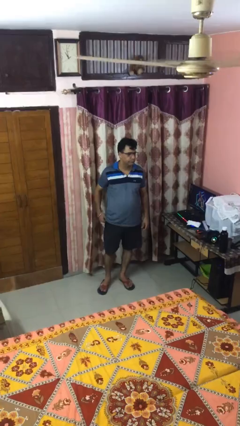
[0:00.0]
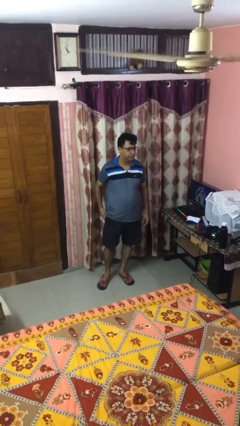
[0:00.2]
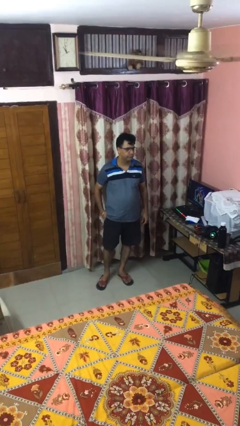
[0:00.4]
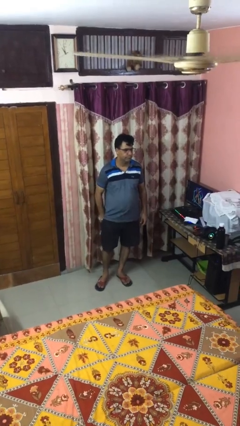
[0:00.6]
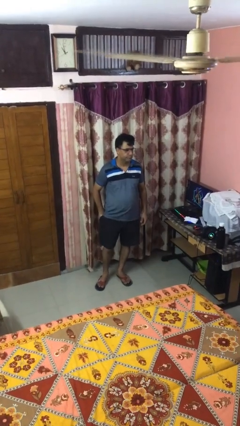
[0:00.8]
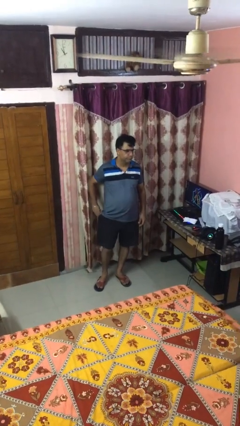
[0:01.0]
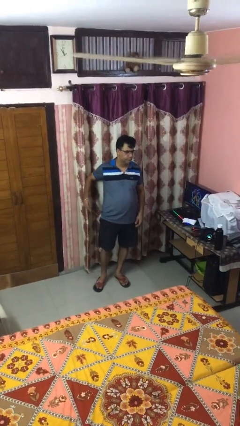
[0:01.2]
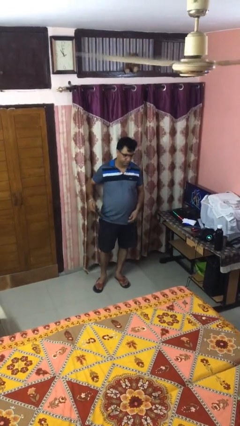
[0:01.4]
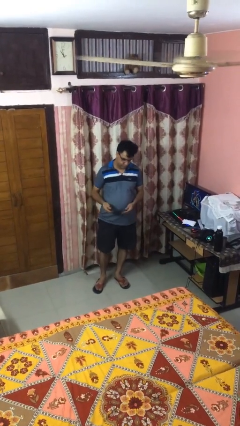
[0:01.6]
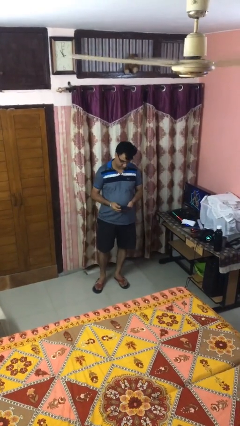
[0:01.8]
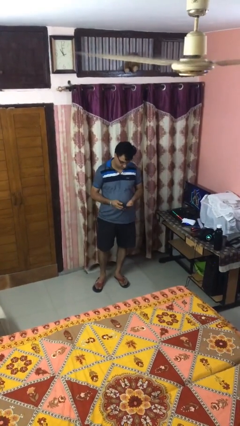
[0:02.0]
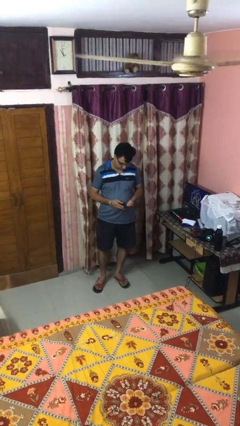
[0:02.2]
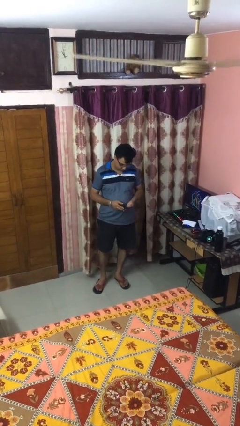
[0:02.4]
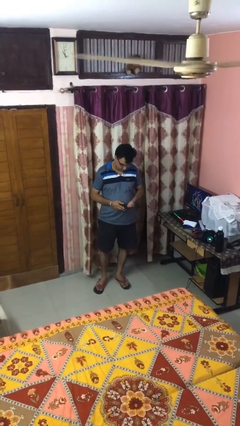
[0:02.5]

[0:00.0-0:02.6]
person takes phone from pocket

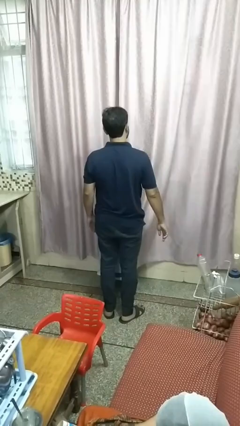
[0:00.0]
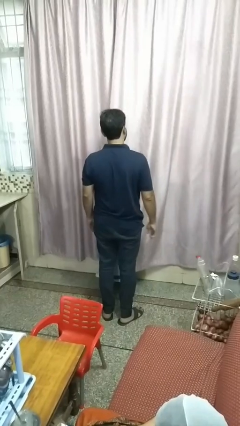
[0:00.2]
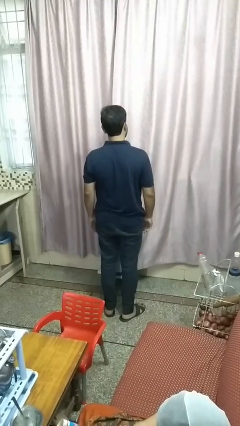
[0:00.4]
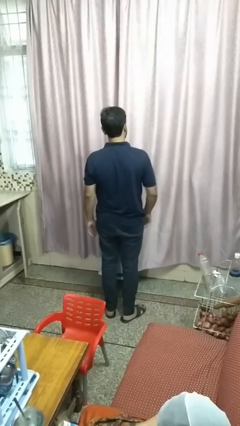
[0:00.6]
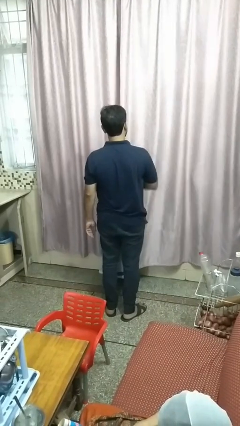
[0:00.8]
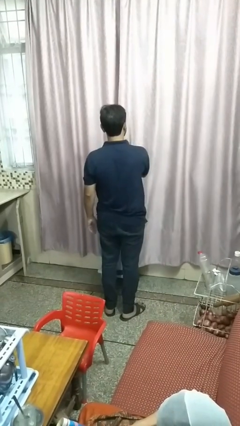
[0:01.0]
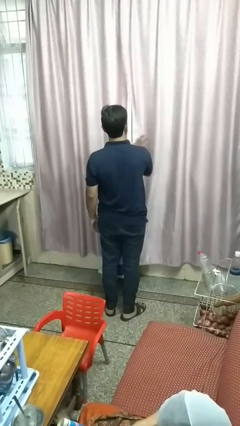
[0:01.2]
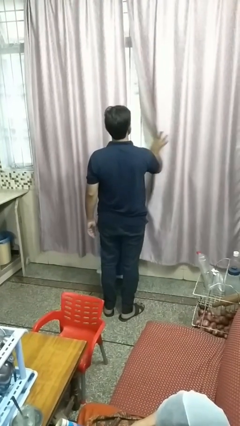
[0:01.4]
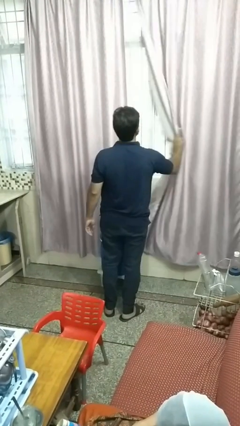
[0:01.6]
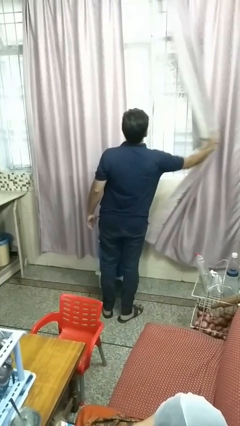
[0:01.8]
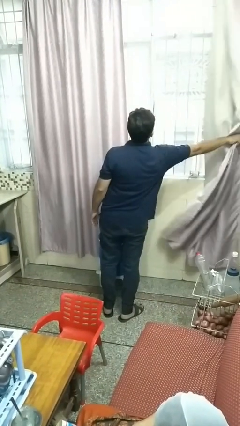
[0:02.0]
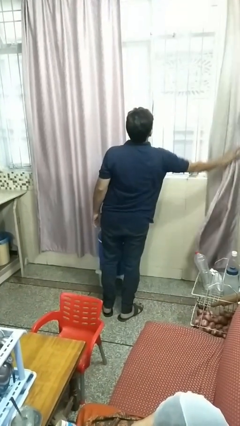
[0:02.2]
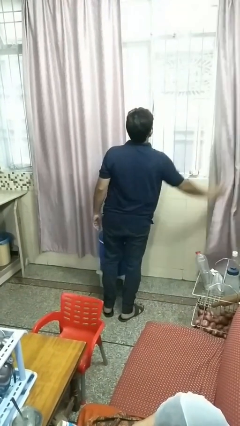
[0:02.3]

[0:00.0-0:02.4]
person opens curtains

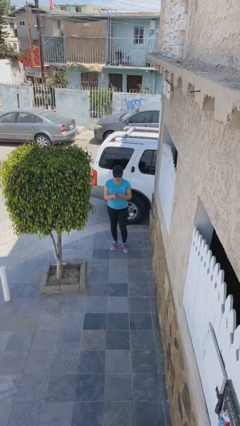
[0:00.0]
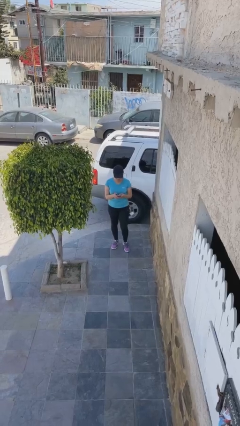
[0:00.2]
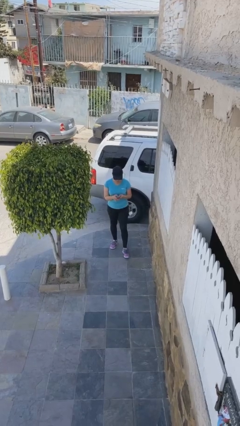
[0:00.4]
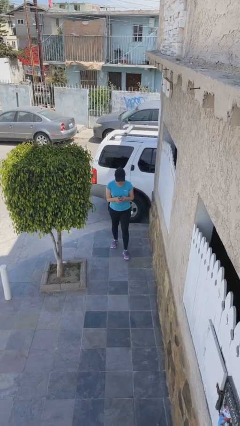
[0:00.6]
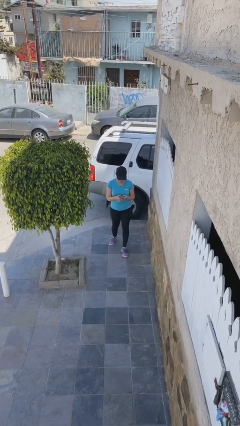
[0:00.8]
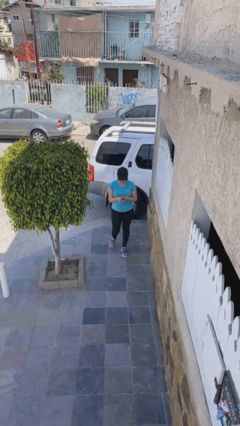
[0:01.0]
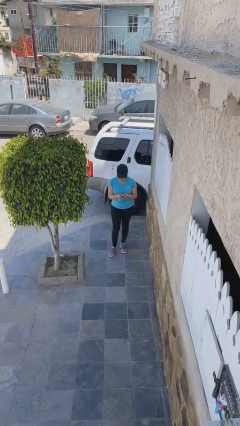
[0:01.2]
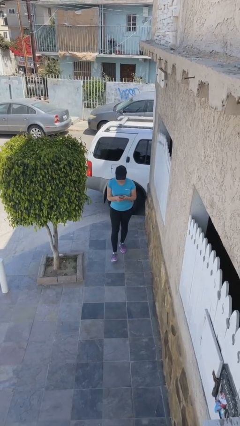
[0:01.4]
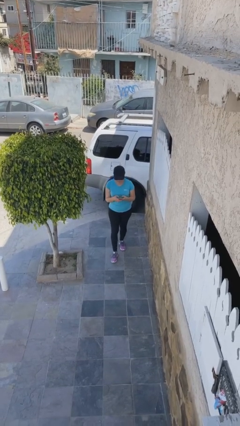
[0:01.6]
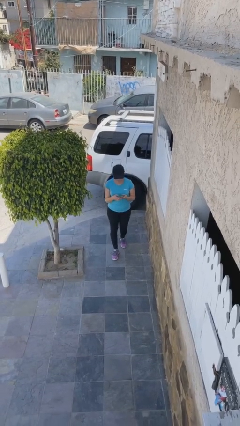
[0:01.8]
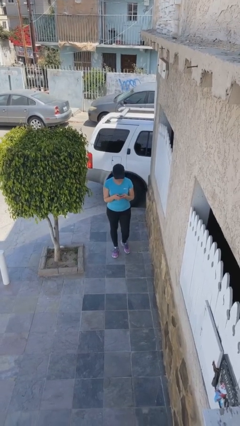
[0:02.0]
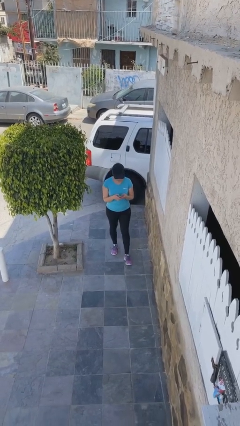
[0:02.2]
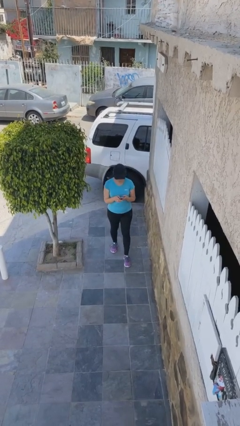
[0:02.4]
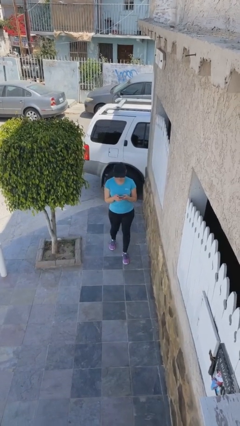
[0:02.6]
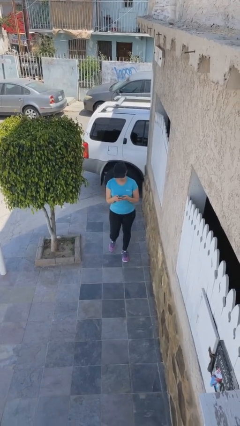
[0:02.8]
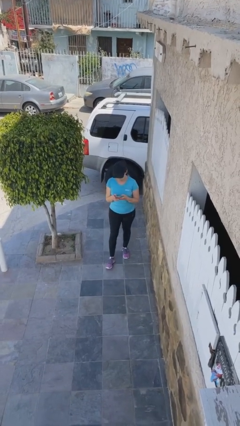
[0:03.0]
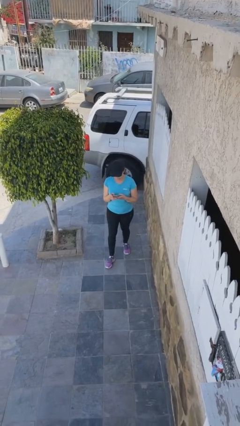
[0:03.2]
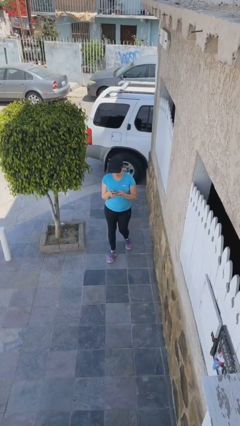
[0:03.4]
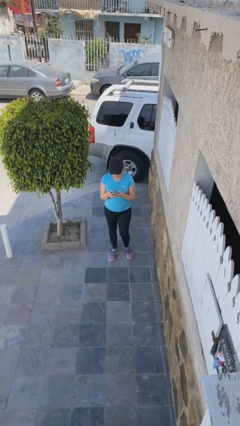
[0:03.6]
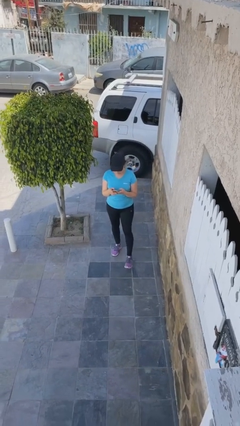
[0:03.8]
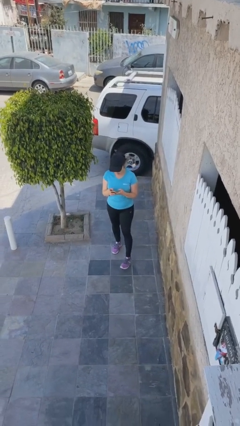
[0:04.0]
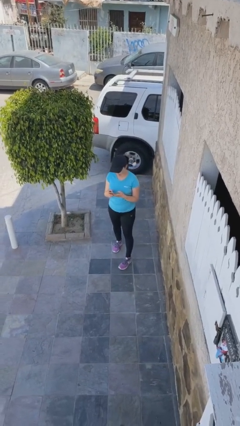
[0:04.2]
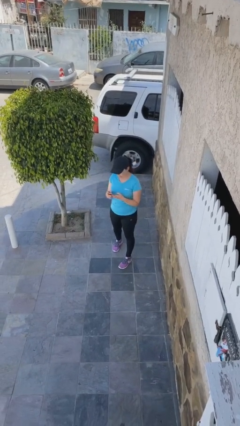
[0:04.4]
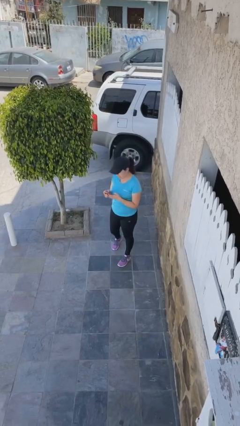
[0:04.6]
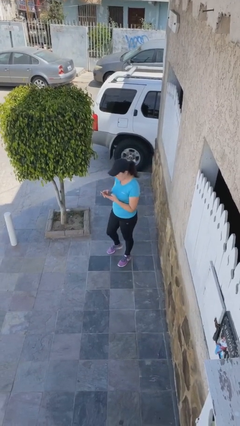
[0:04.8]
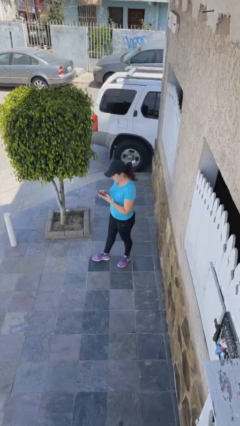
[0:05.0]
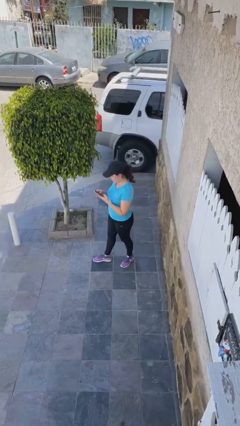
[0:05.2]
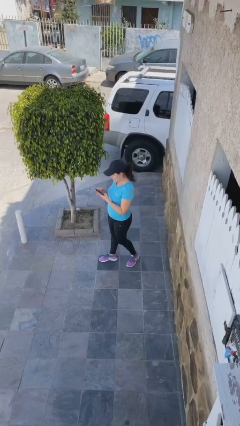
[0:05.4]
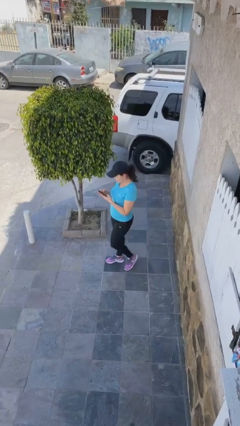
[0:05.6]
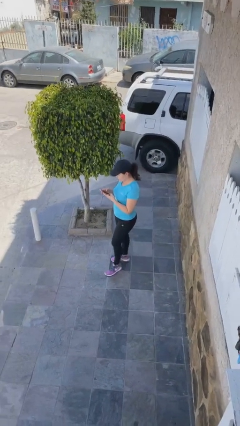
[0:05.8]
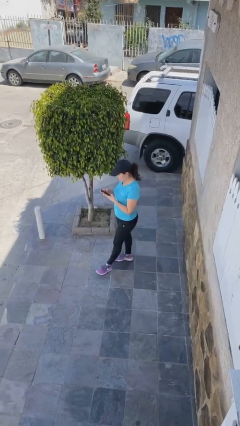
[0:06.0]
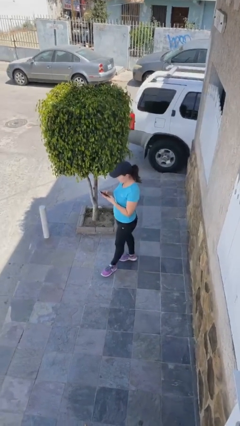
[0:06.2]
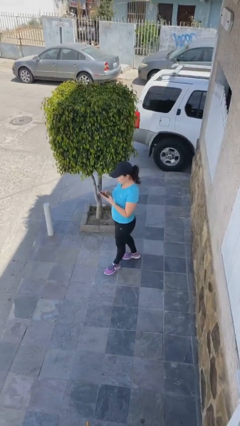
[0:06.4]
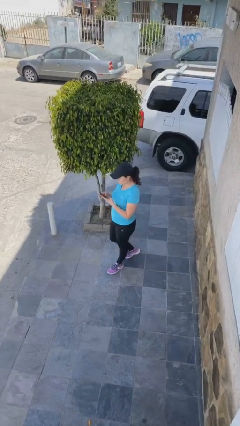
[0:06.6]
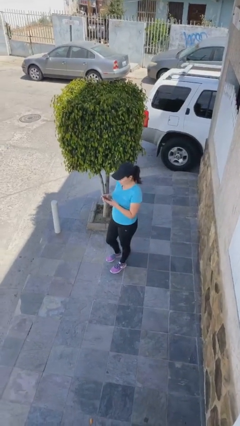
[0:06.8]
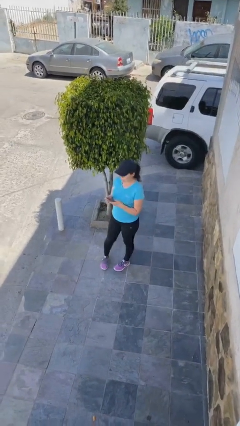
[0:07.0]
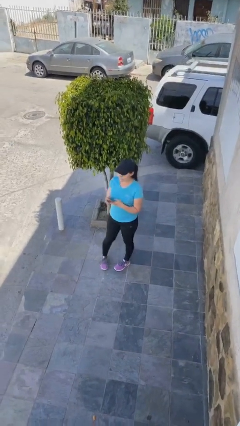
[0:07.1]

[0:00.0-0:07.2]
person texts on phone

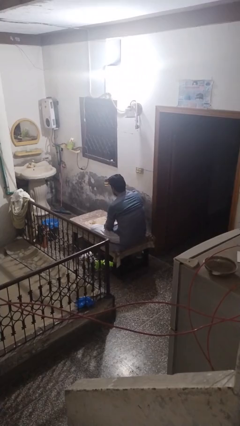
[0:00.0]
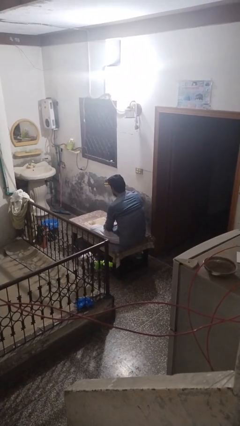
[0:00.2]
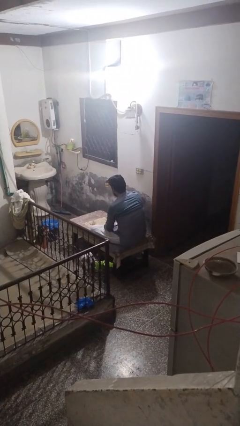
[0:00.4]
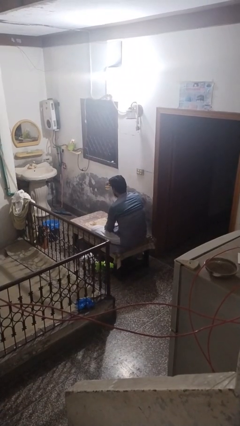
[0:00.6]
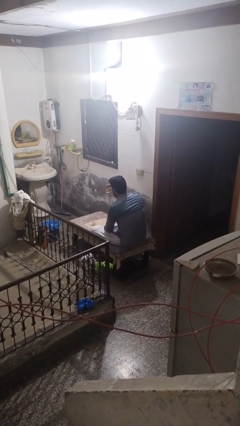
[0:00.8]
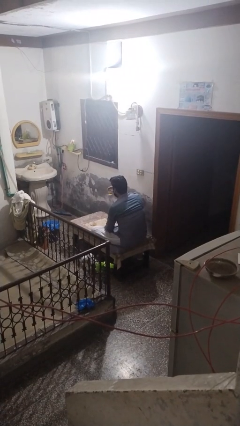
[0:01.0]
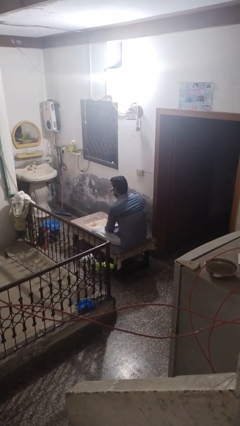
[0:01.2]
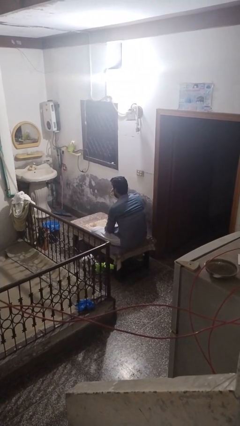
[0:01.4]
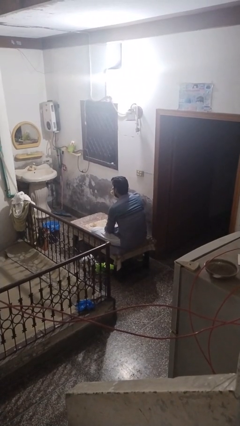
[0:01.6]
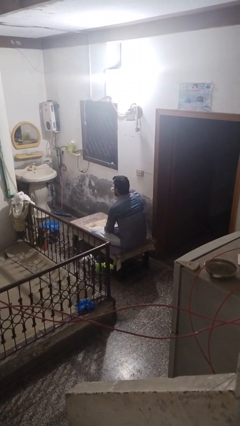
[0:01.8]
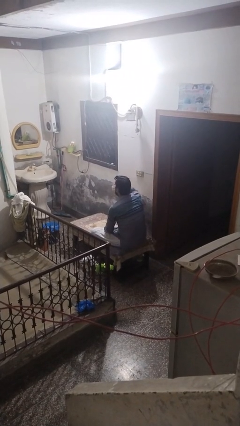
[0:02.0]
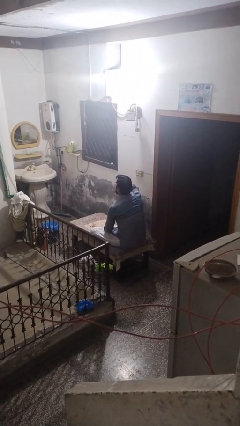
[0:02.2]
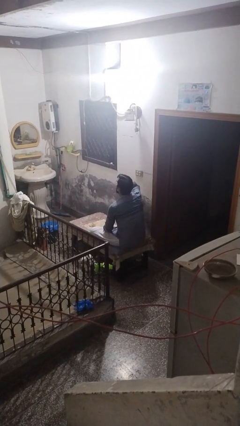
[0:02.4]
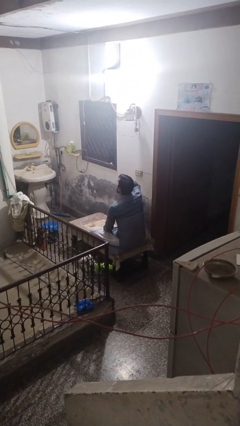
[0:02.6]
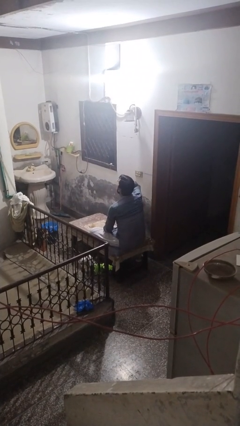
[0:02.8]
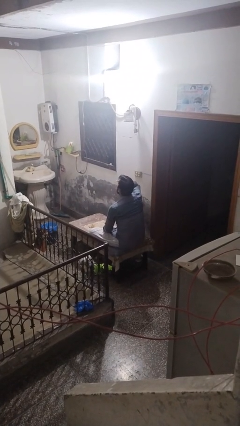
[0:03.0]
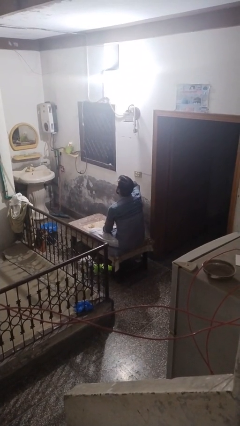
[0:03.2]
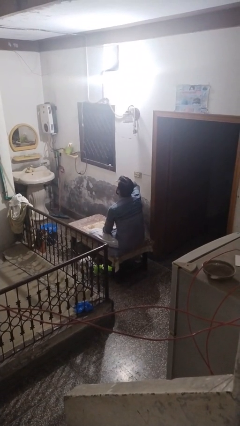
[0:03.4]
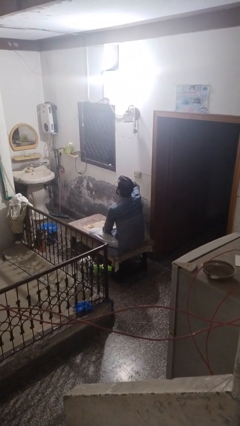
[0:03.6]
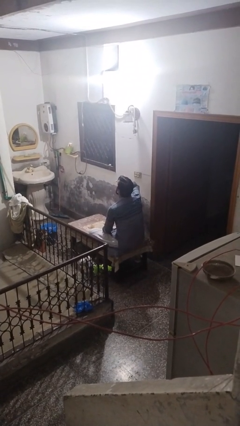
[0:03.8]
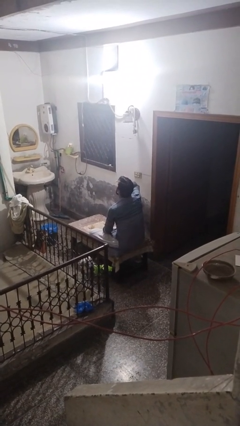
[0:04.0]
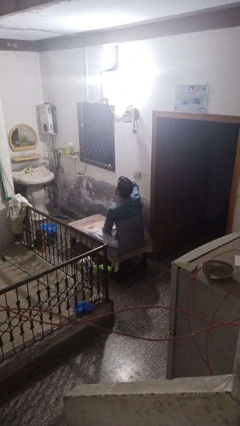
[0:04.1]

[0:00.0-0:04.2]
person drinks from shotglass

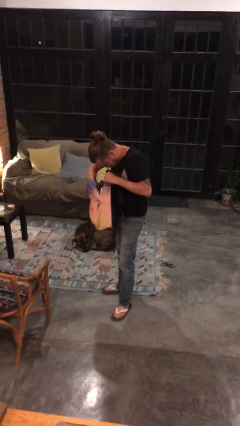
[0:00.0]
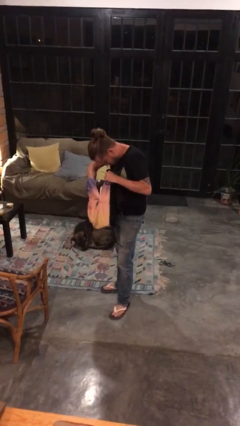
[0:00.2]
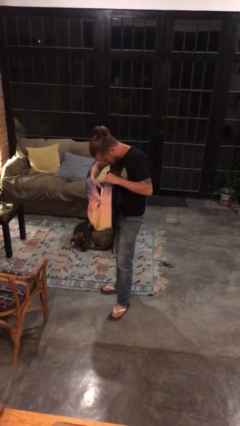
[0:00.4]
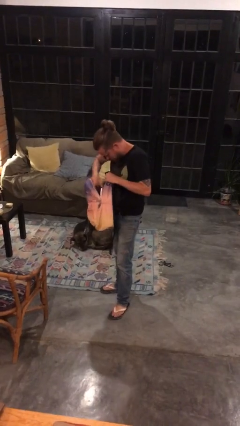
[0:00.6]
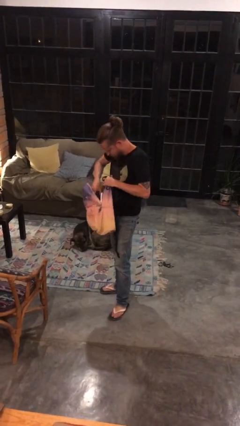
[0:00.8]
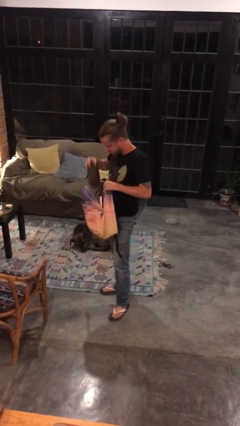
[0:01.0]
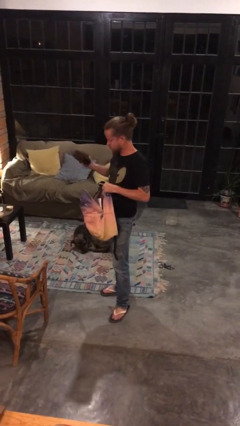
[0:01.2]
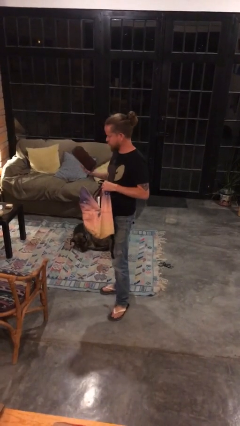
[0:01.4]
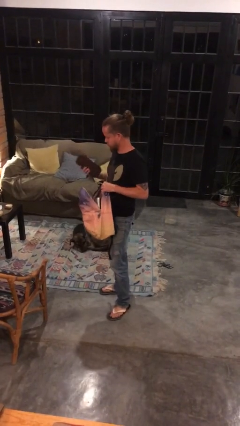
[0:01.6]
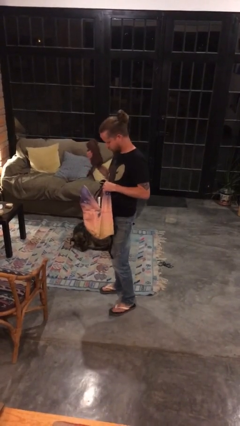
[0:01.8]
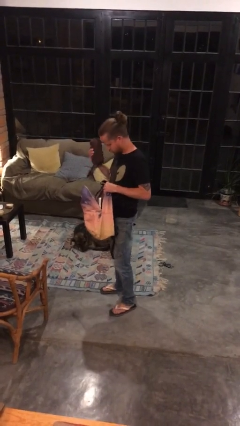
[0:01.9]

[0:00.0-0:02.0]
person takes object from backpack
